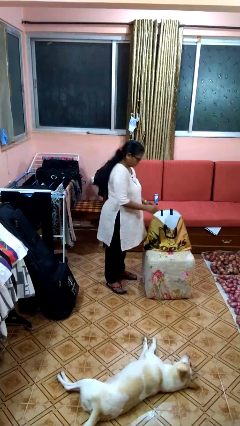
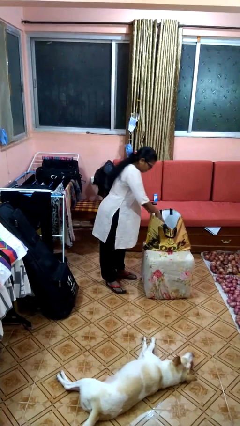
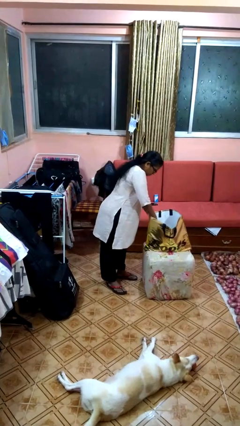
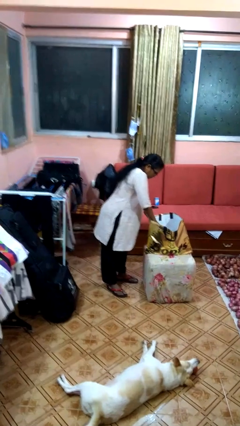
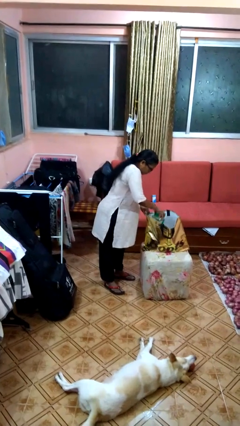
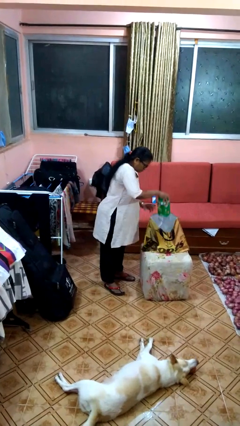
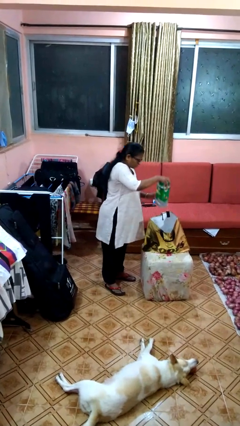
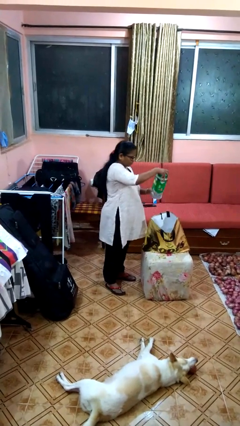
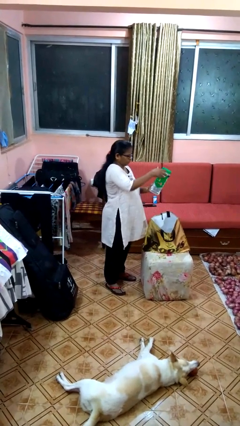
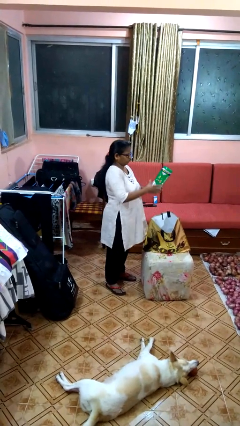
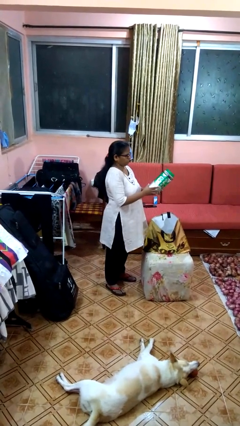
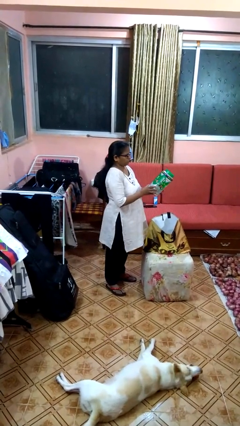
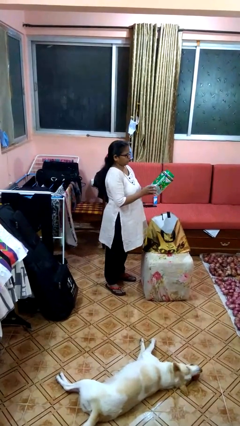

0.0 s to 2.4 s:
person takes object from bag

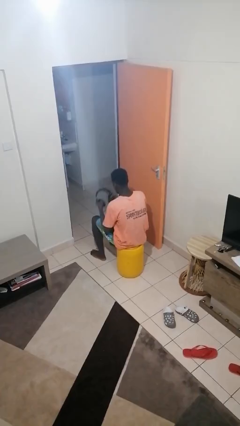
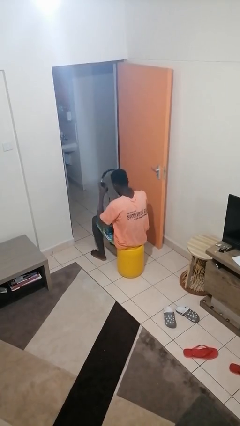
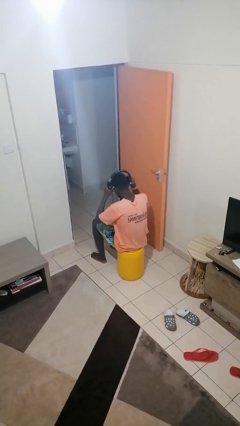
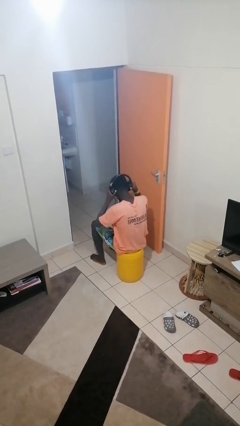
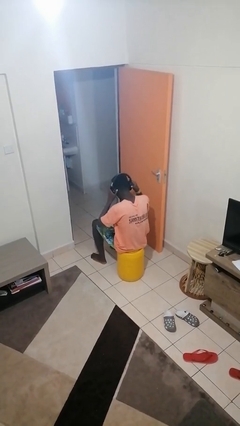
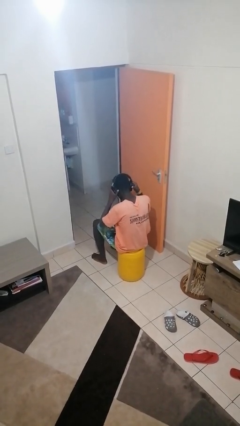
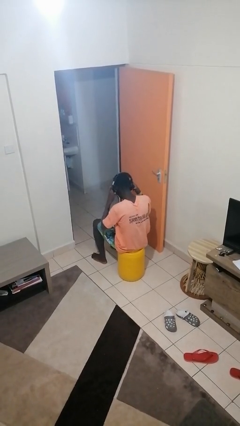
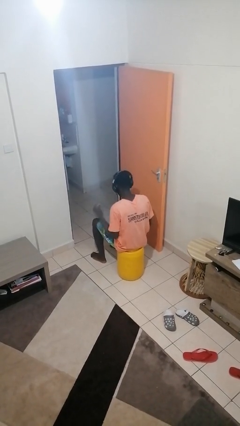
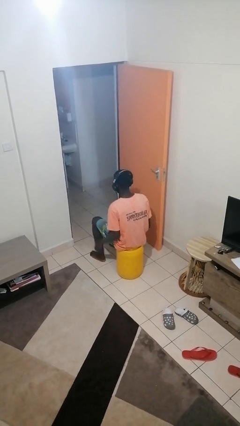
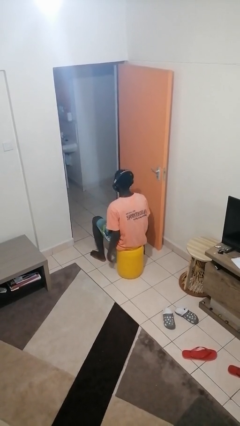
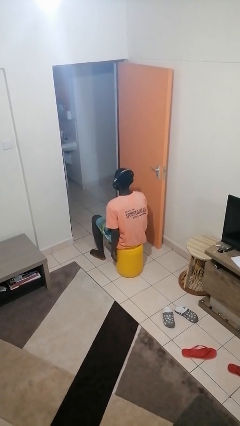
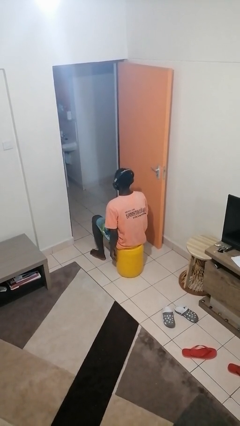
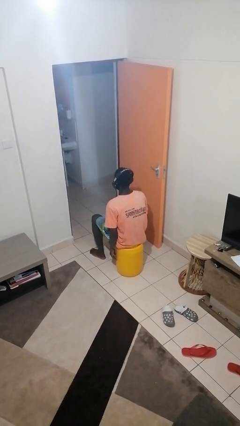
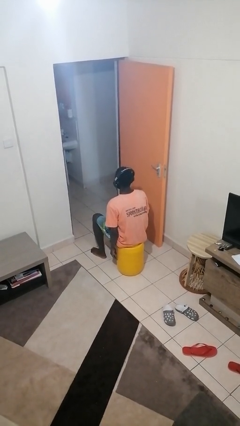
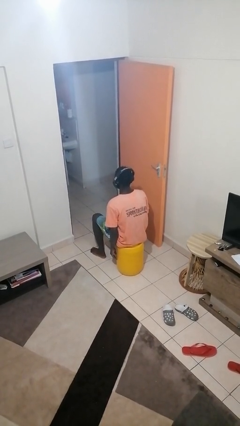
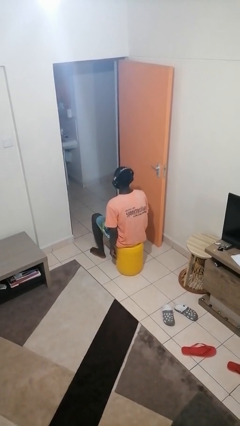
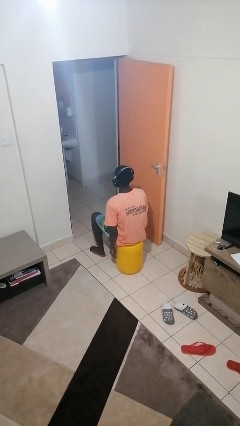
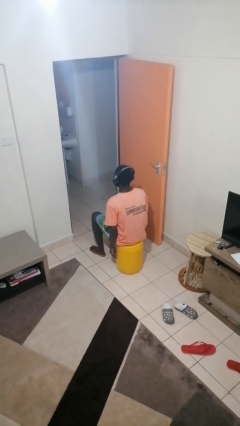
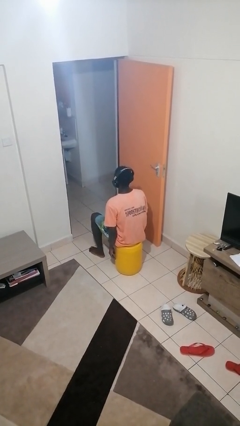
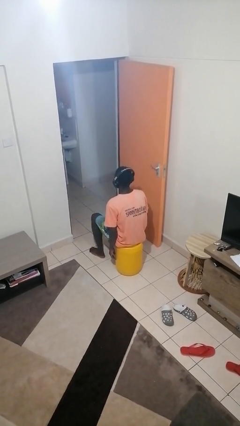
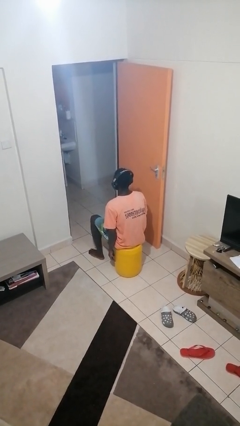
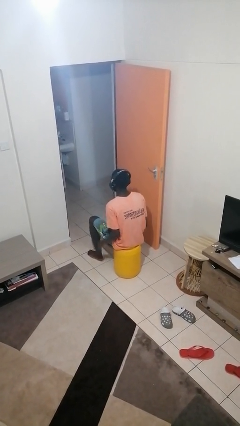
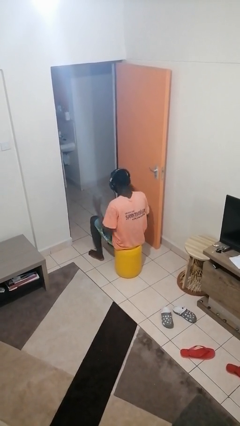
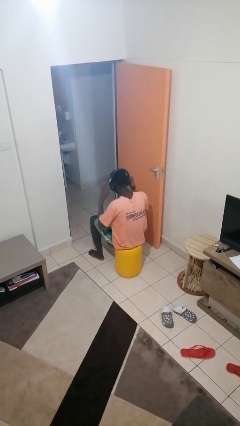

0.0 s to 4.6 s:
person puts on headphones

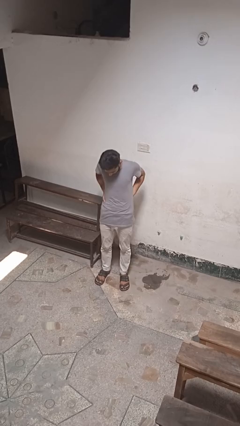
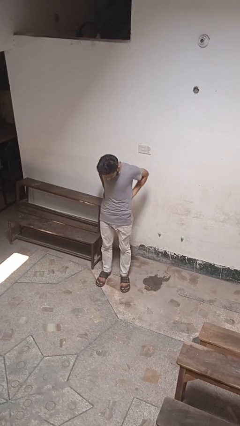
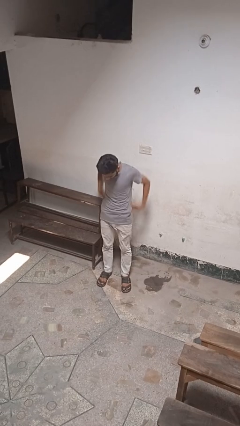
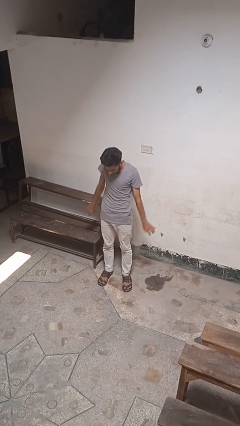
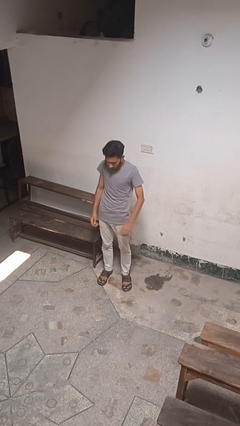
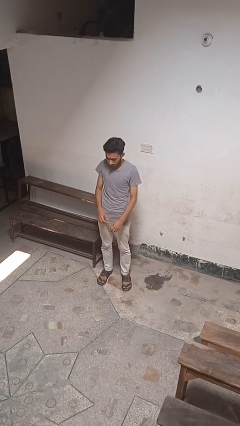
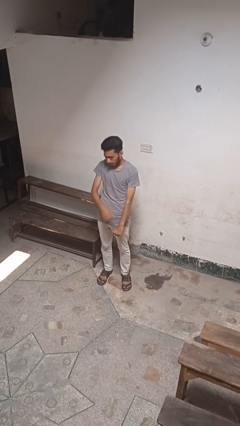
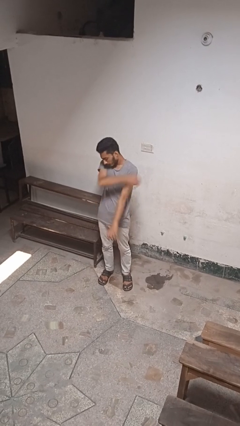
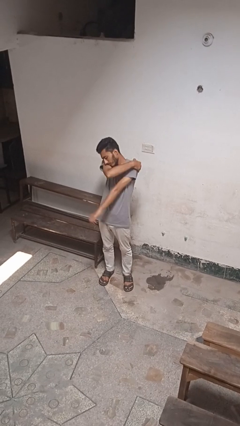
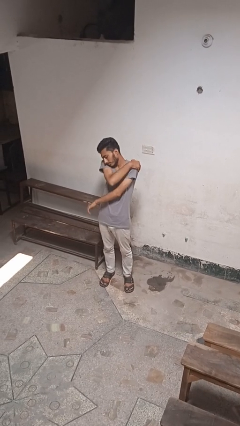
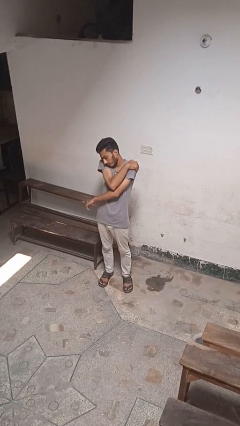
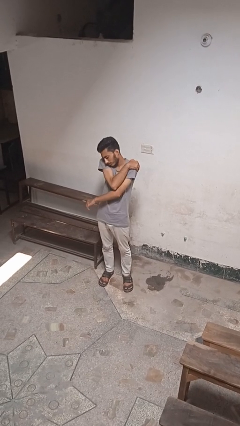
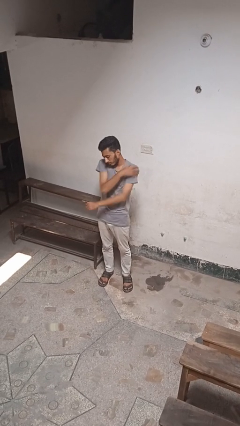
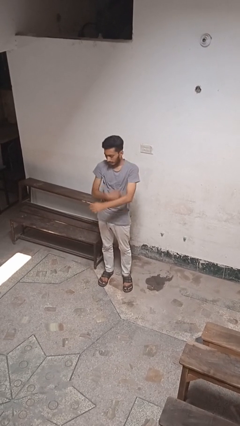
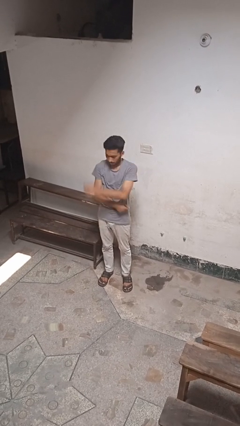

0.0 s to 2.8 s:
person puts feet up

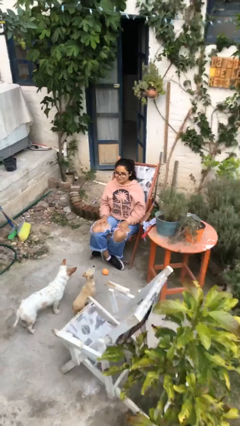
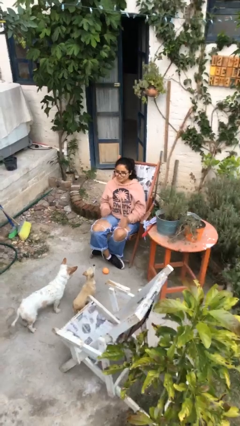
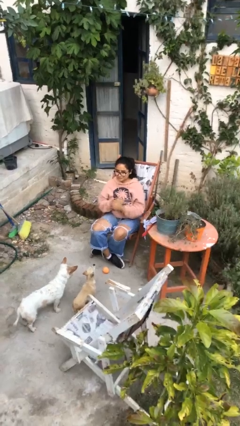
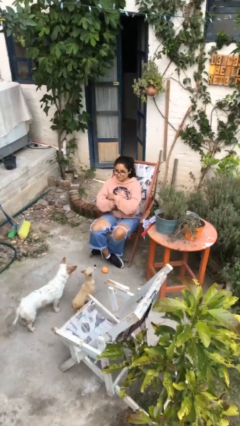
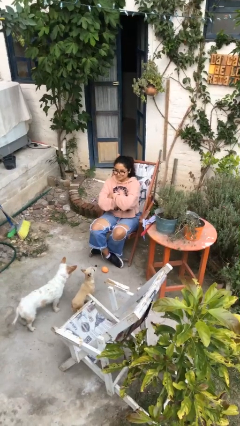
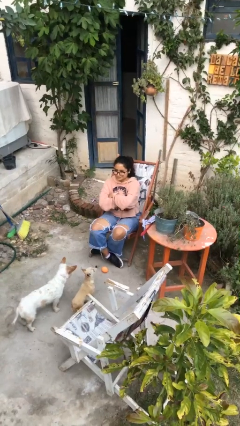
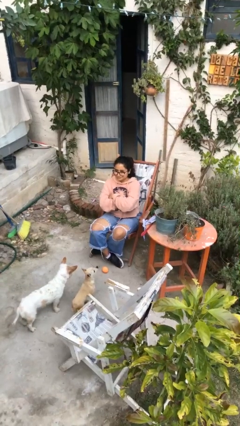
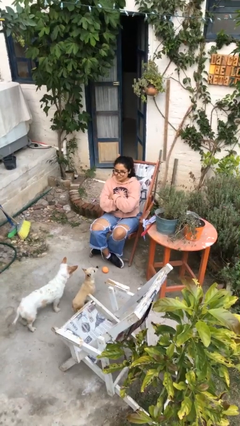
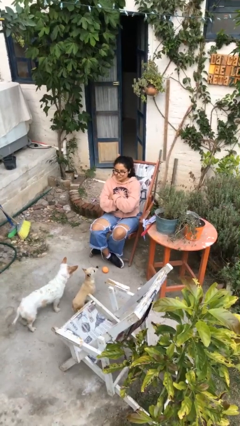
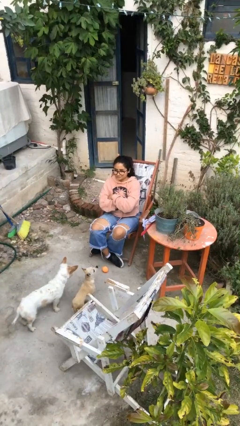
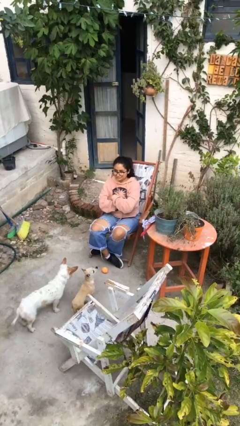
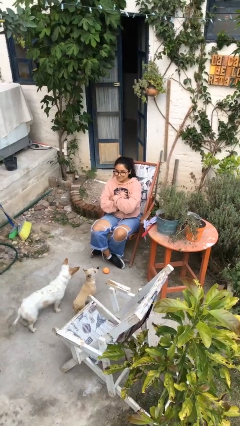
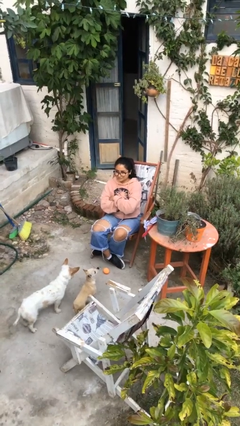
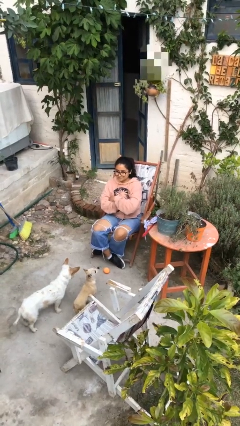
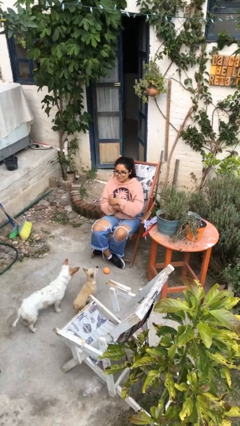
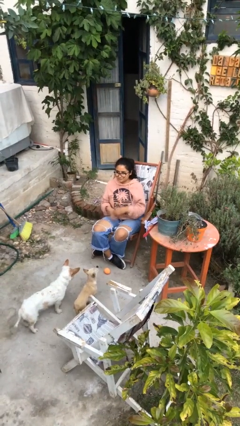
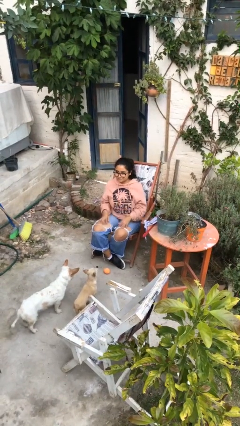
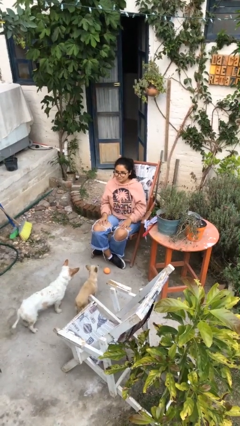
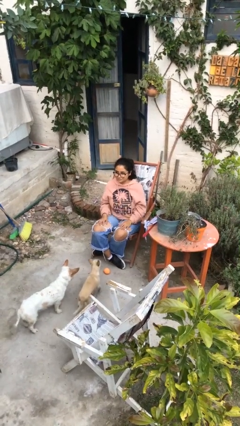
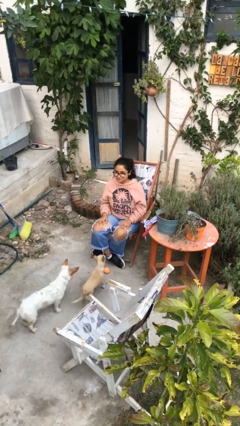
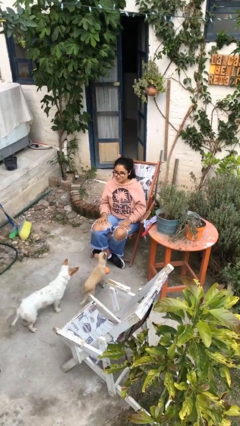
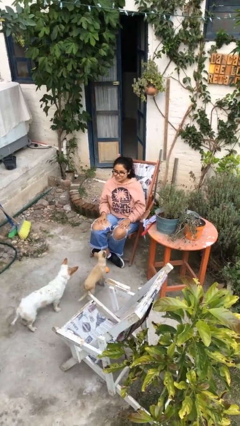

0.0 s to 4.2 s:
person crosses arms

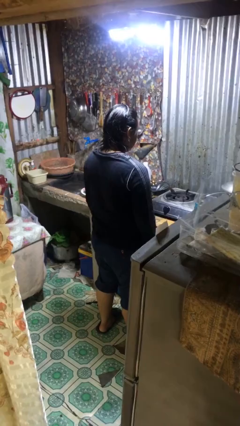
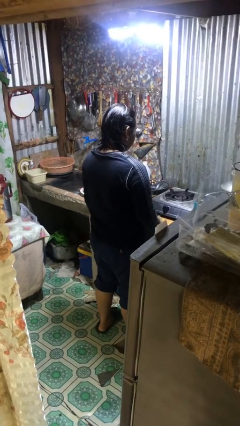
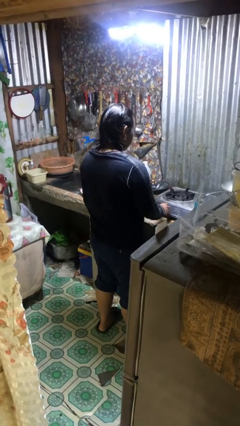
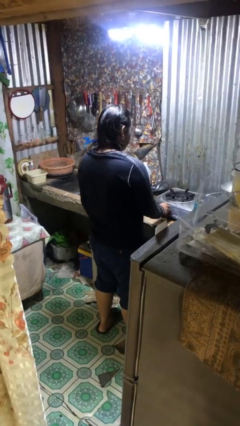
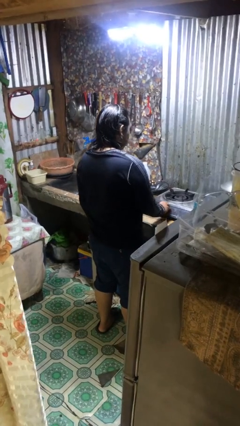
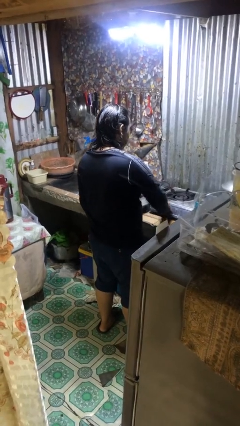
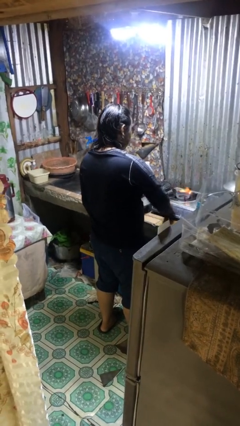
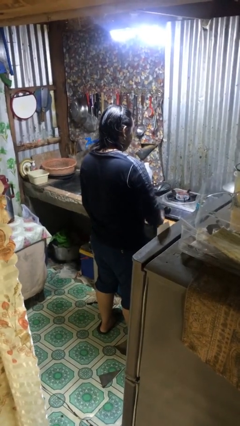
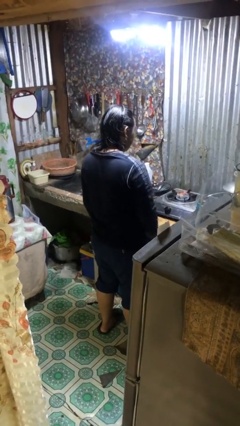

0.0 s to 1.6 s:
person turns on stovetop

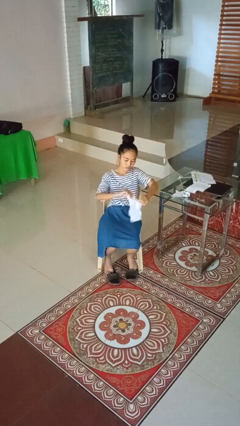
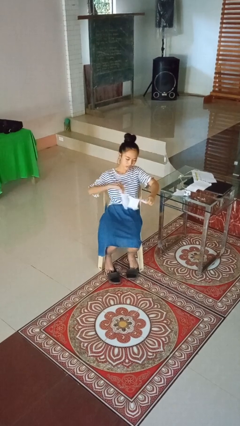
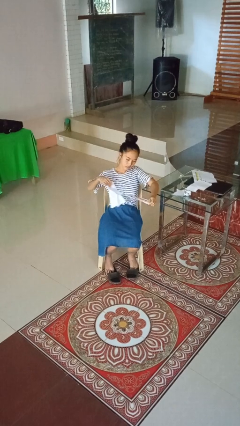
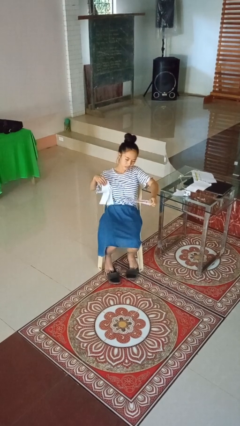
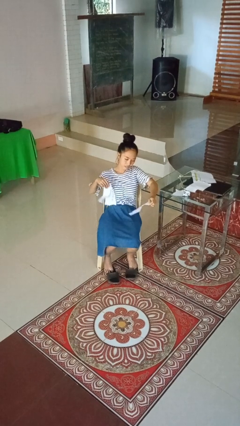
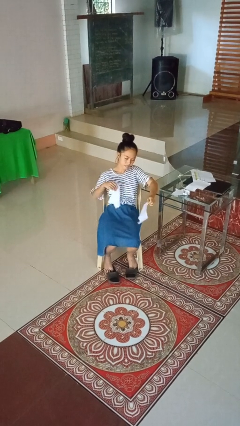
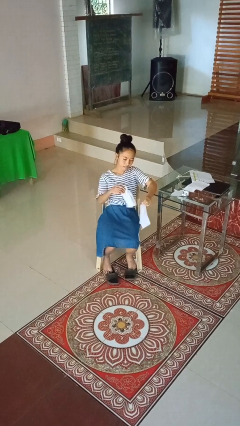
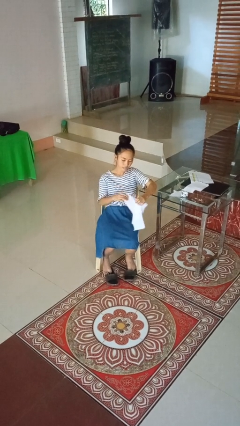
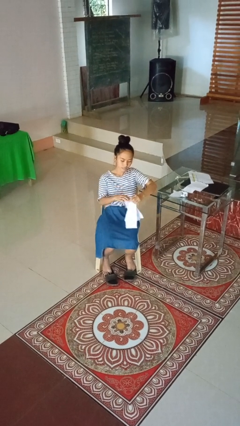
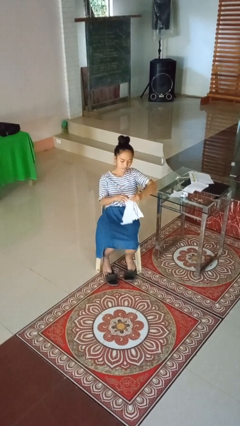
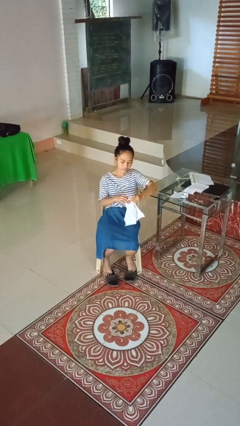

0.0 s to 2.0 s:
person tears paper

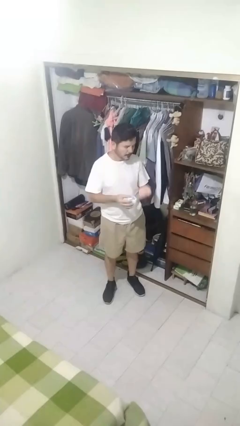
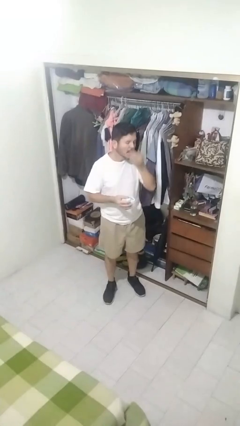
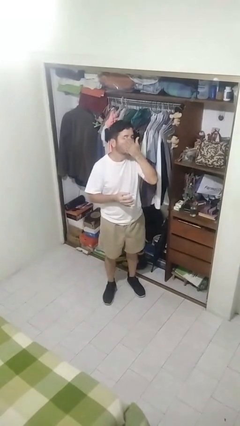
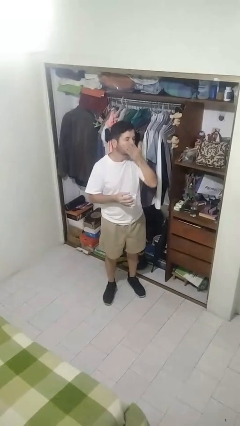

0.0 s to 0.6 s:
person takes medicine pills
